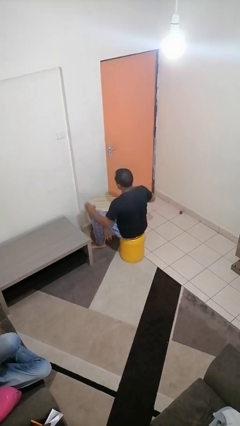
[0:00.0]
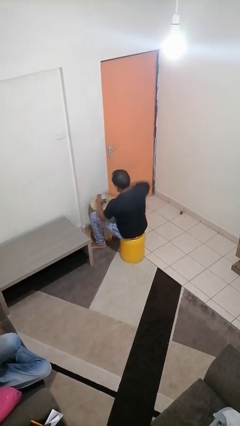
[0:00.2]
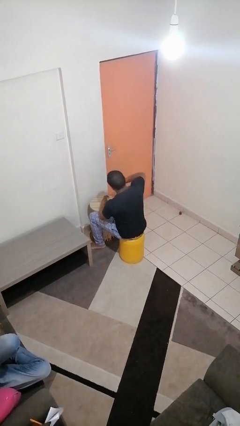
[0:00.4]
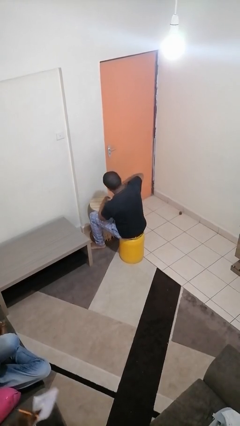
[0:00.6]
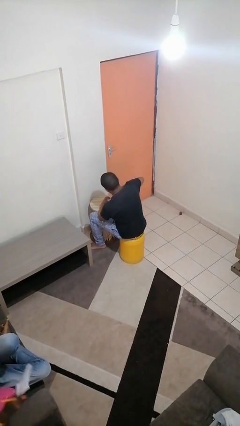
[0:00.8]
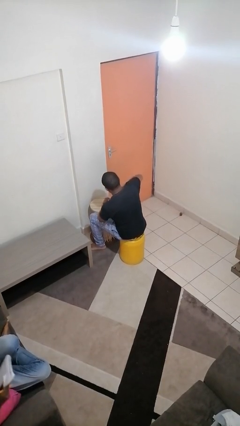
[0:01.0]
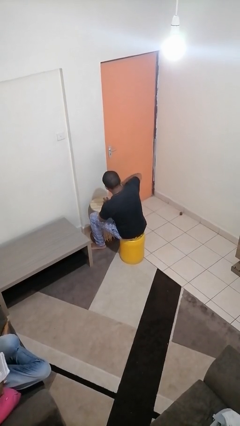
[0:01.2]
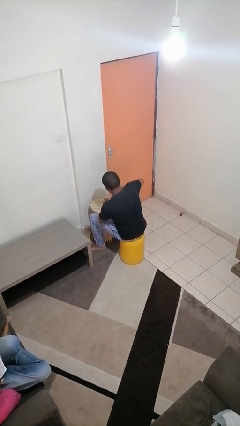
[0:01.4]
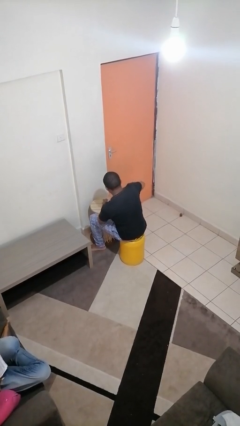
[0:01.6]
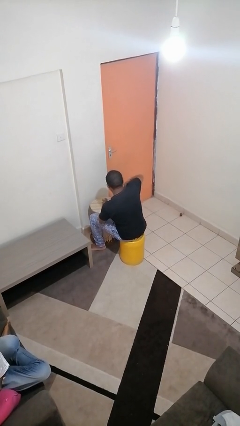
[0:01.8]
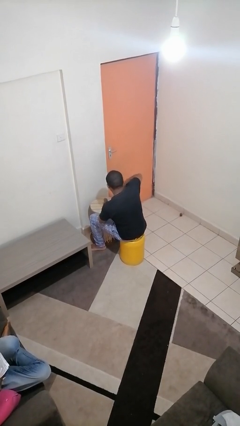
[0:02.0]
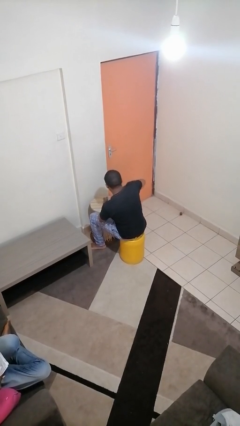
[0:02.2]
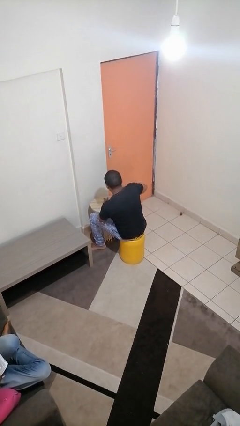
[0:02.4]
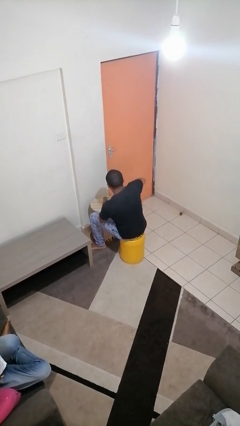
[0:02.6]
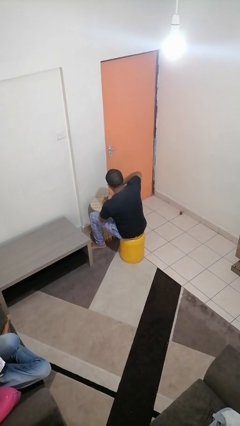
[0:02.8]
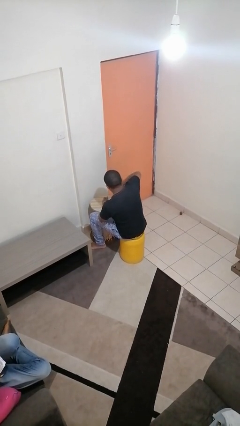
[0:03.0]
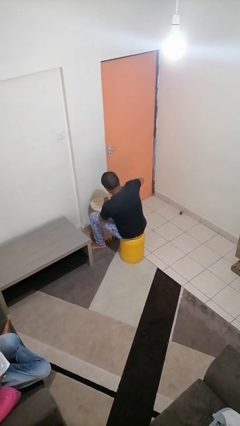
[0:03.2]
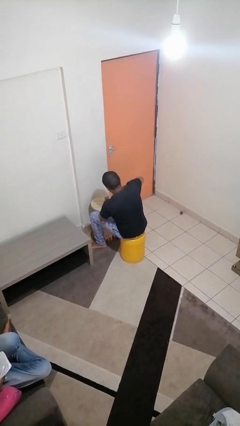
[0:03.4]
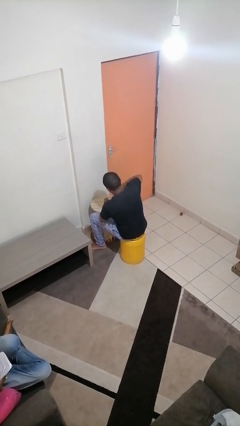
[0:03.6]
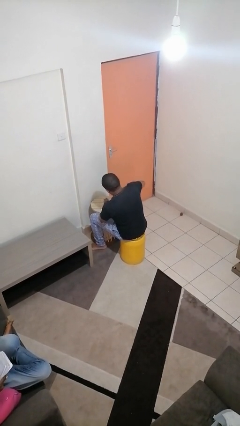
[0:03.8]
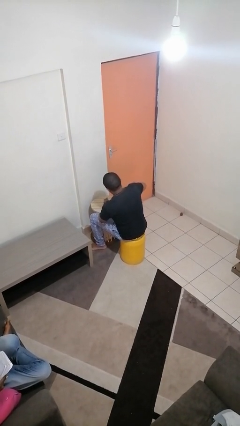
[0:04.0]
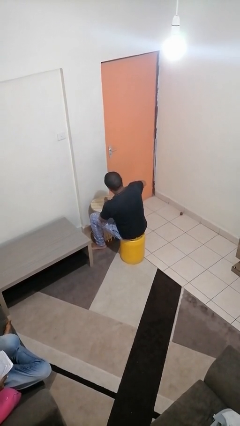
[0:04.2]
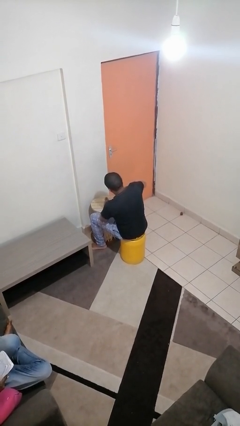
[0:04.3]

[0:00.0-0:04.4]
person opens can with can opener

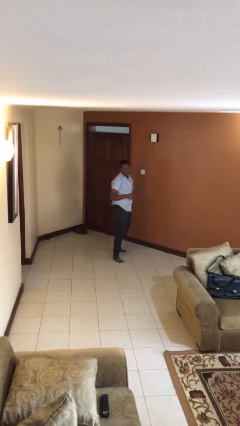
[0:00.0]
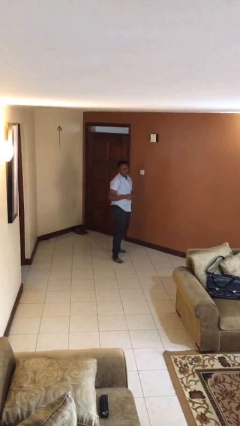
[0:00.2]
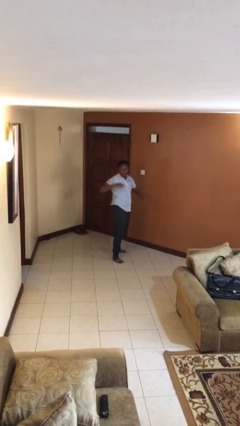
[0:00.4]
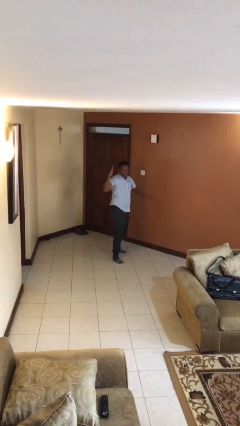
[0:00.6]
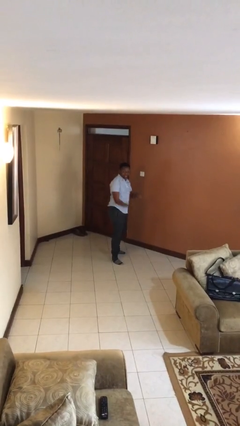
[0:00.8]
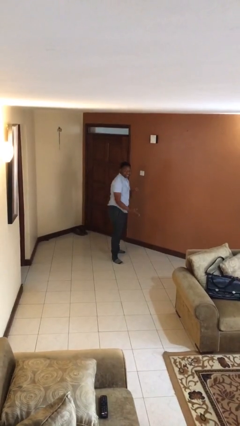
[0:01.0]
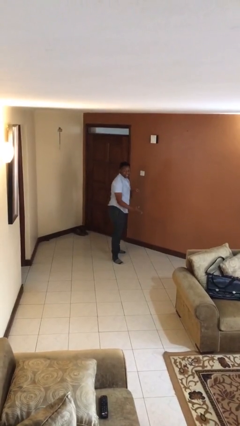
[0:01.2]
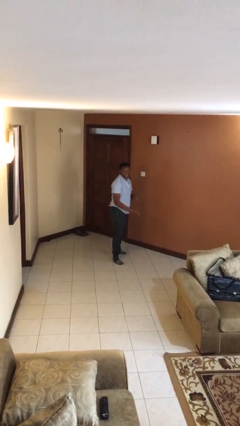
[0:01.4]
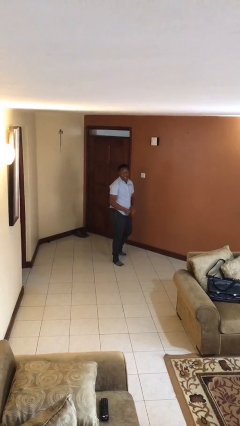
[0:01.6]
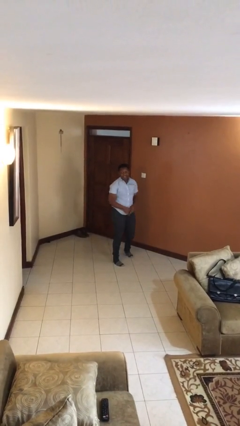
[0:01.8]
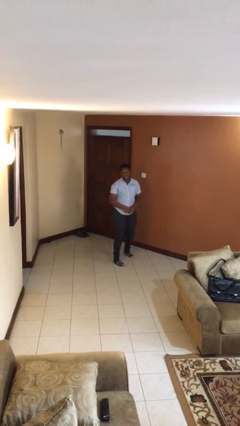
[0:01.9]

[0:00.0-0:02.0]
person karate chop

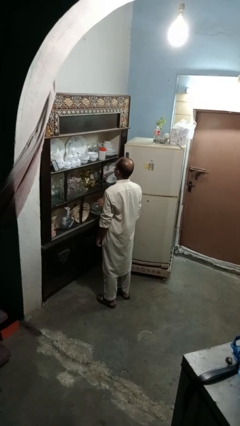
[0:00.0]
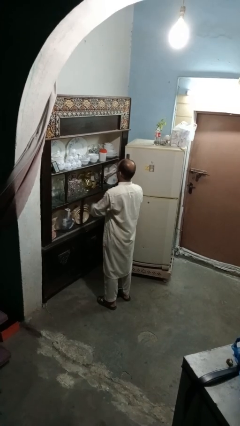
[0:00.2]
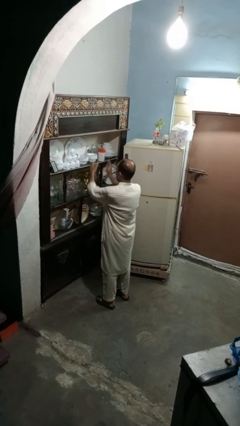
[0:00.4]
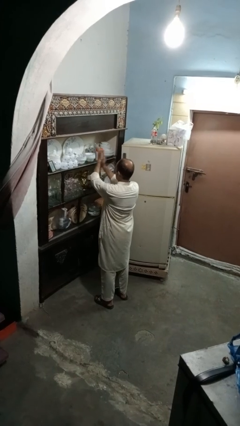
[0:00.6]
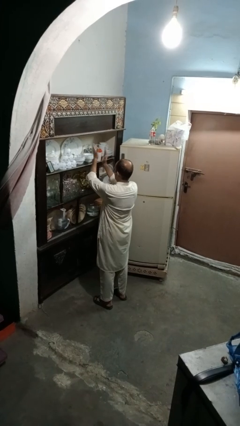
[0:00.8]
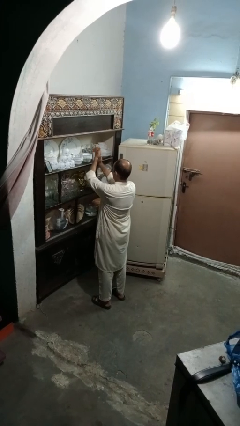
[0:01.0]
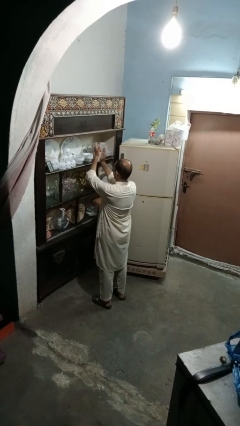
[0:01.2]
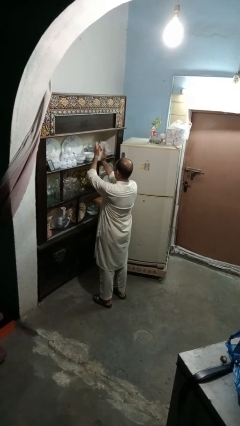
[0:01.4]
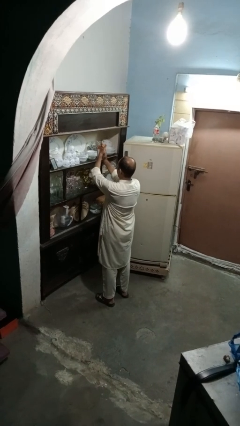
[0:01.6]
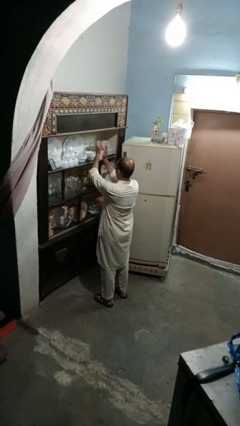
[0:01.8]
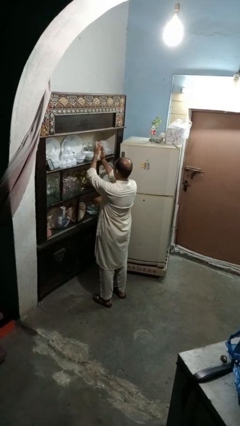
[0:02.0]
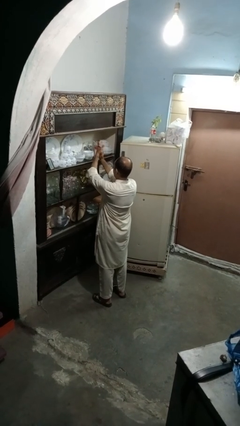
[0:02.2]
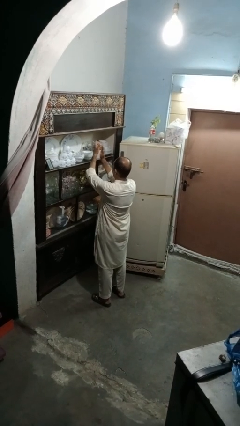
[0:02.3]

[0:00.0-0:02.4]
person claps hands

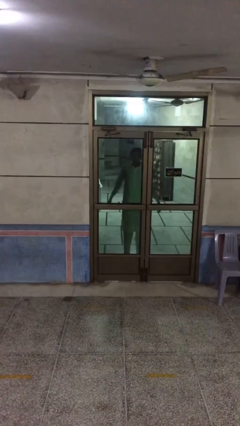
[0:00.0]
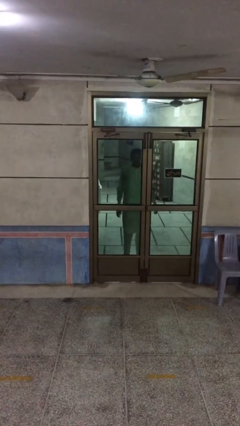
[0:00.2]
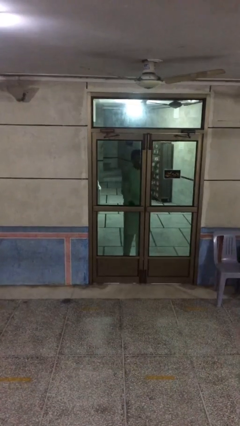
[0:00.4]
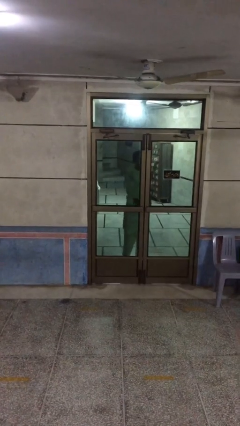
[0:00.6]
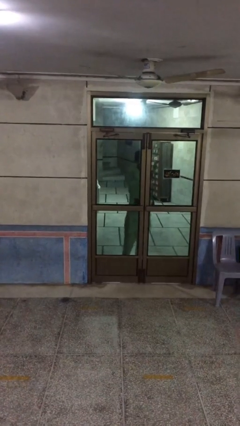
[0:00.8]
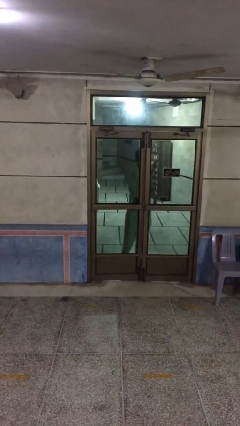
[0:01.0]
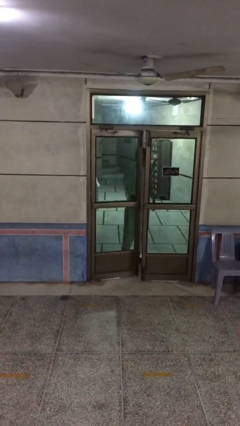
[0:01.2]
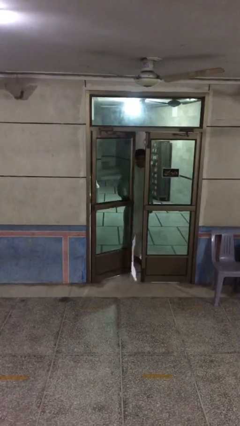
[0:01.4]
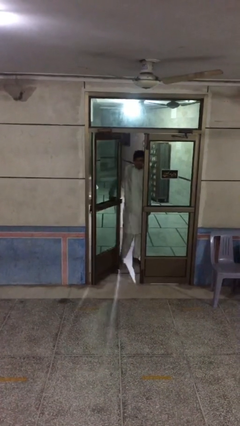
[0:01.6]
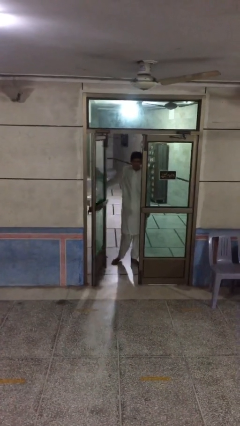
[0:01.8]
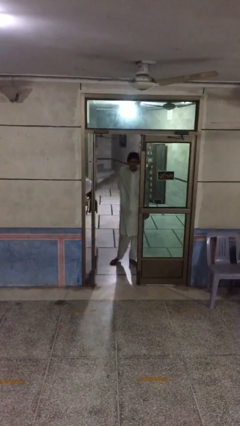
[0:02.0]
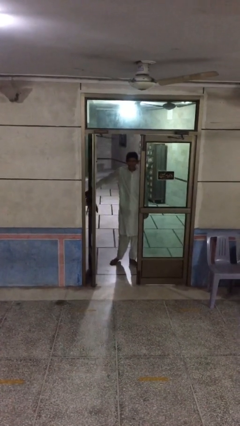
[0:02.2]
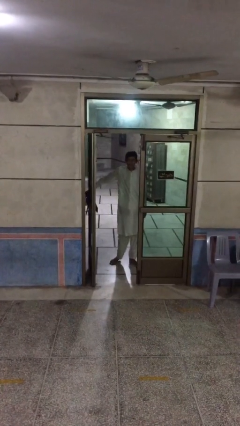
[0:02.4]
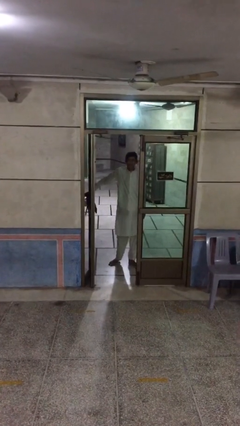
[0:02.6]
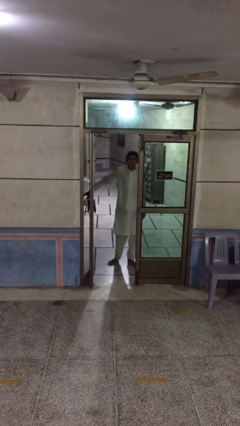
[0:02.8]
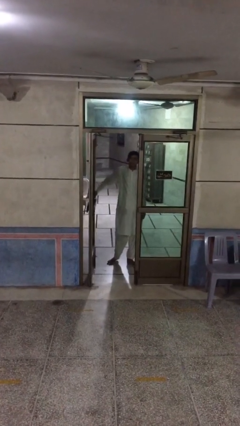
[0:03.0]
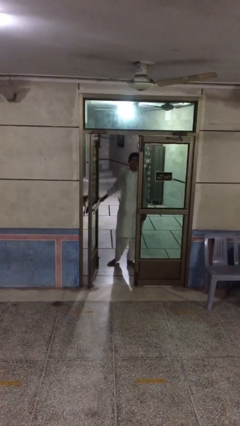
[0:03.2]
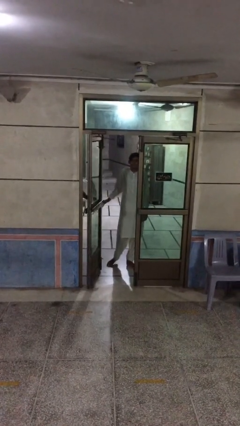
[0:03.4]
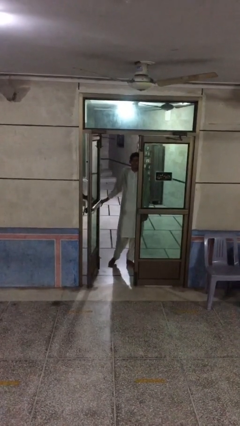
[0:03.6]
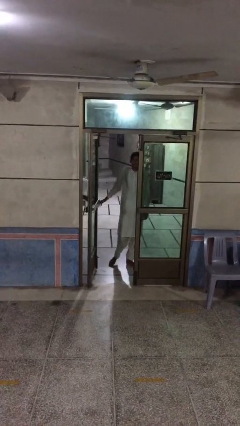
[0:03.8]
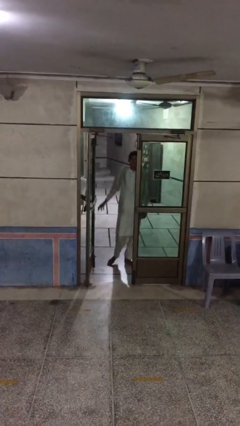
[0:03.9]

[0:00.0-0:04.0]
person opens facility door

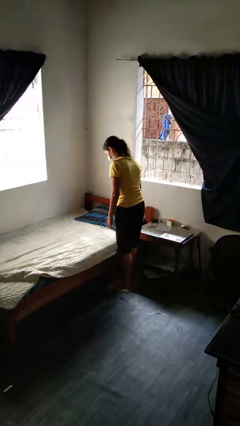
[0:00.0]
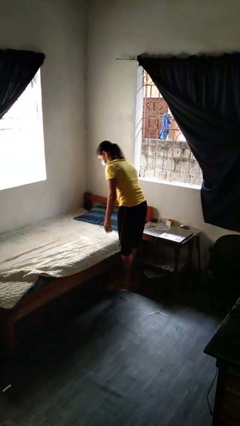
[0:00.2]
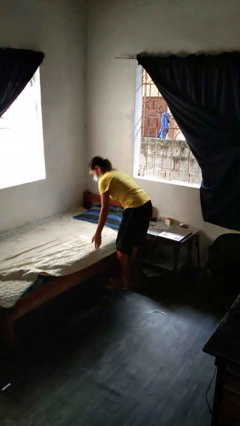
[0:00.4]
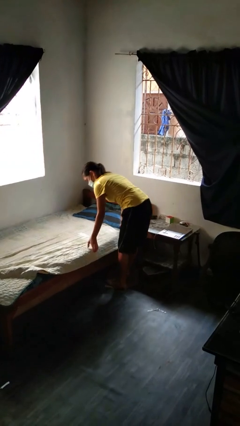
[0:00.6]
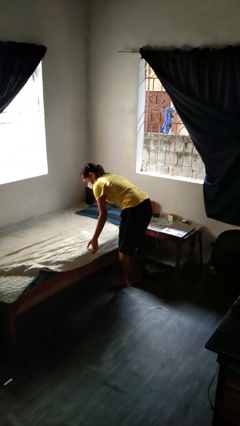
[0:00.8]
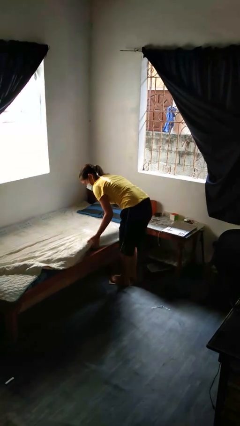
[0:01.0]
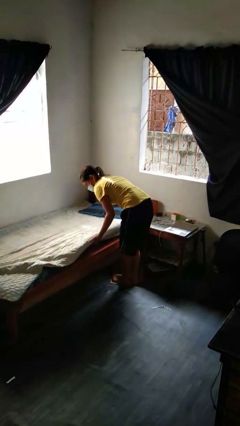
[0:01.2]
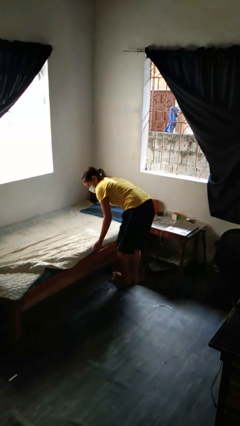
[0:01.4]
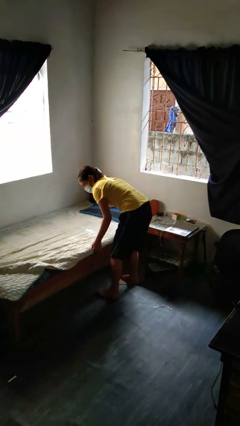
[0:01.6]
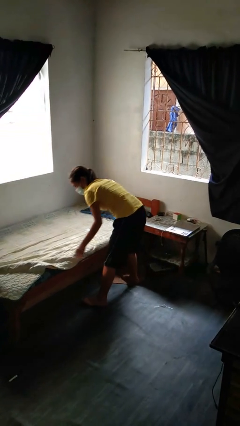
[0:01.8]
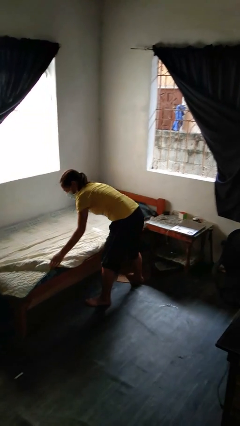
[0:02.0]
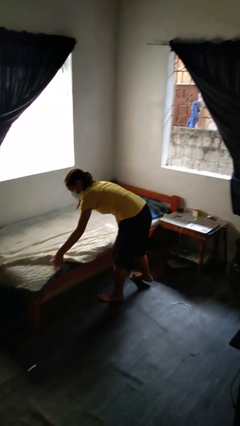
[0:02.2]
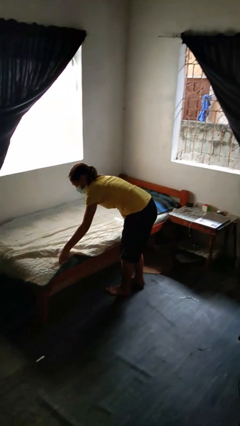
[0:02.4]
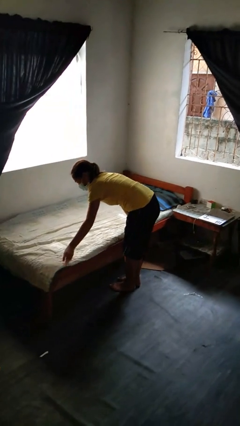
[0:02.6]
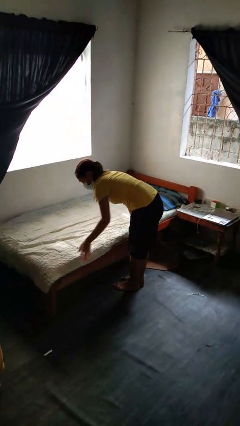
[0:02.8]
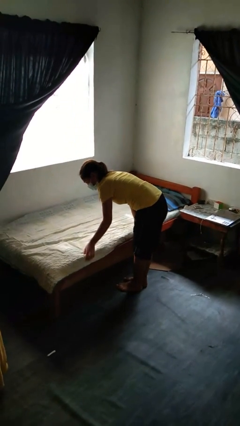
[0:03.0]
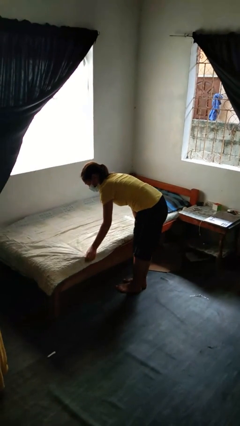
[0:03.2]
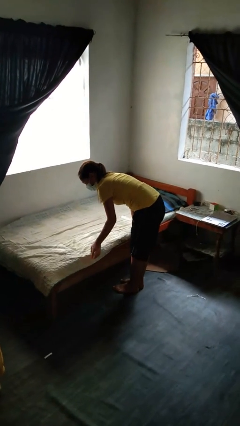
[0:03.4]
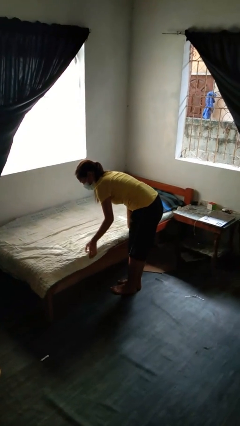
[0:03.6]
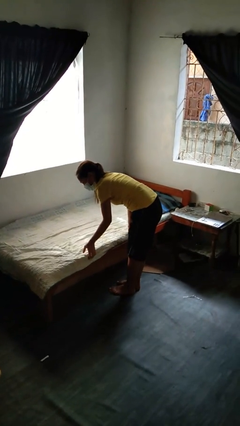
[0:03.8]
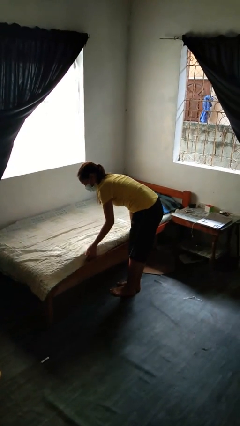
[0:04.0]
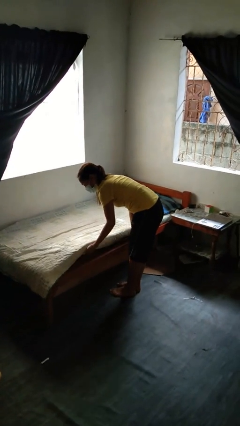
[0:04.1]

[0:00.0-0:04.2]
person makes bed

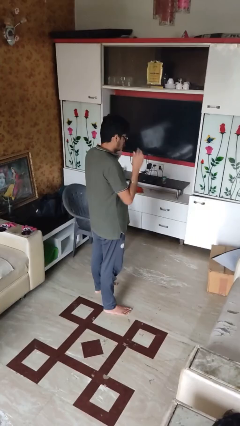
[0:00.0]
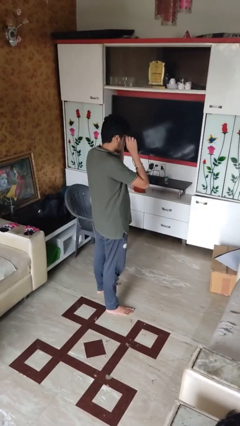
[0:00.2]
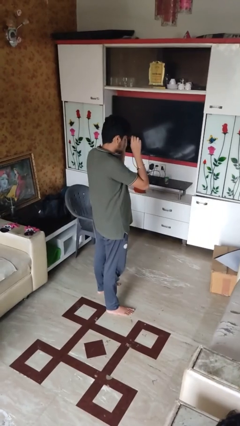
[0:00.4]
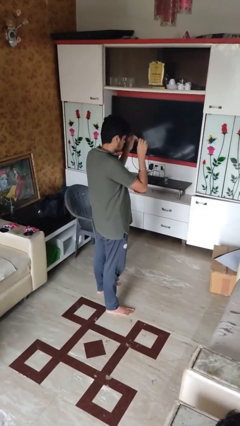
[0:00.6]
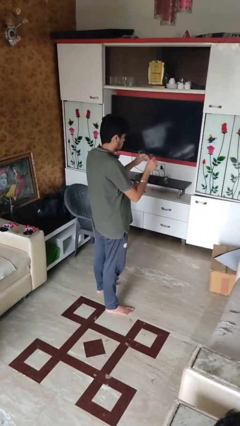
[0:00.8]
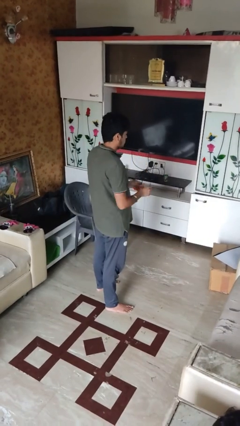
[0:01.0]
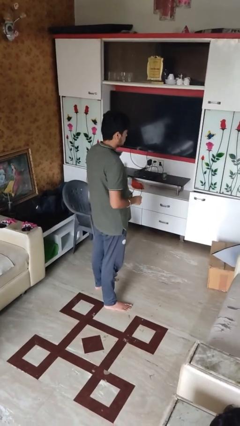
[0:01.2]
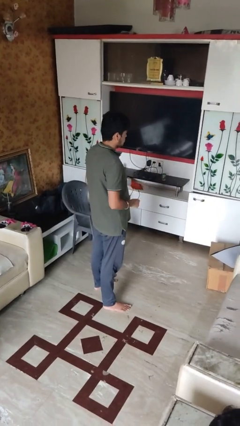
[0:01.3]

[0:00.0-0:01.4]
person takes off glasses
